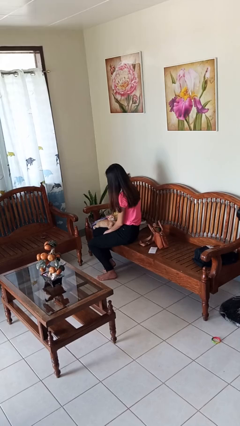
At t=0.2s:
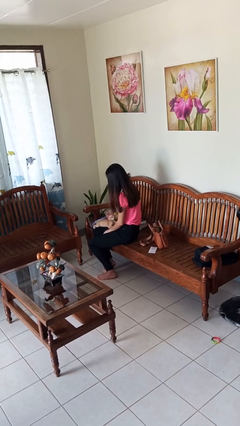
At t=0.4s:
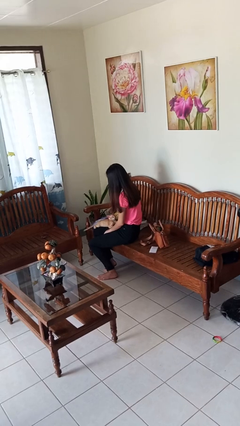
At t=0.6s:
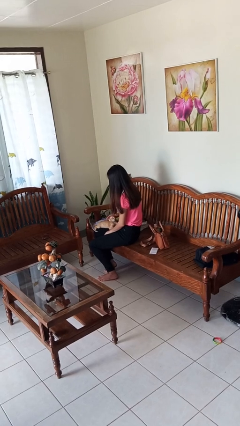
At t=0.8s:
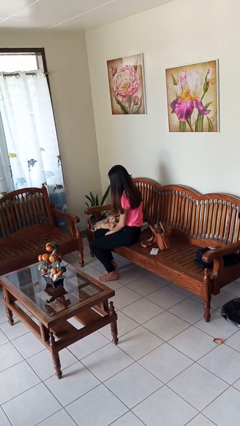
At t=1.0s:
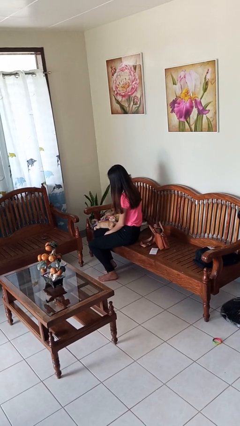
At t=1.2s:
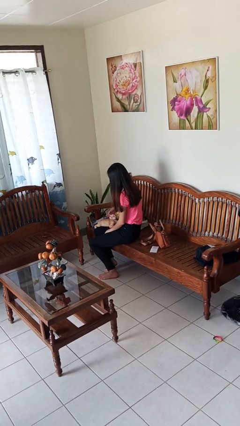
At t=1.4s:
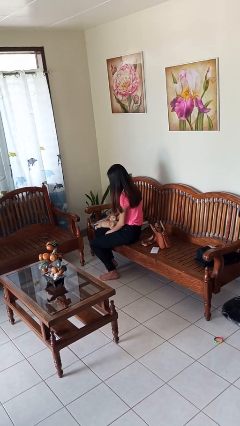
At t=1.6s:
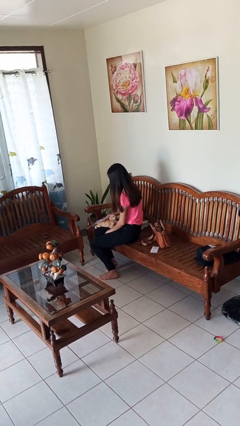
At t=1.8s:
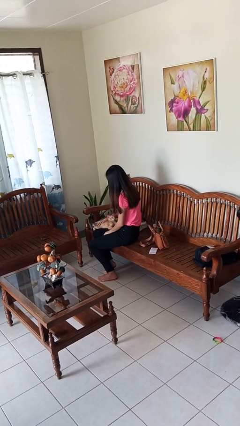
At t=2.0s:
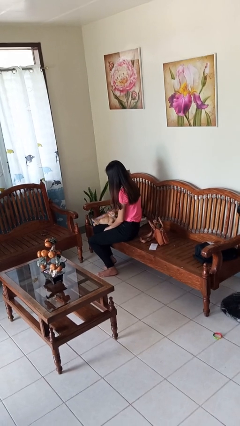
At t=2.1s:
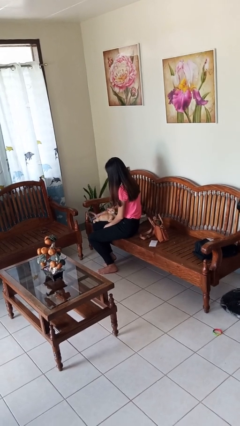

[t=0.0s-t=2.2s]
person pets cat

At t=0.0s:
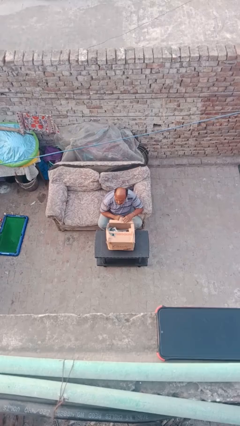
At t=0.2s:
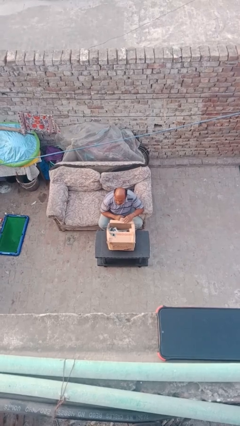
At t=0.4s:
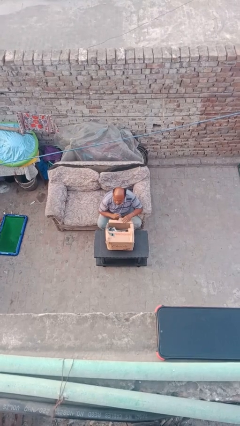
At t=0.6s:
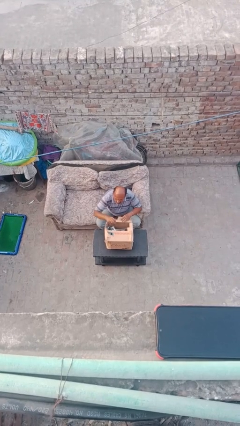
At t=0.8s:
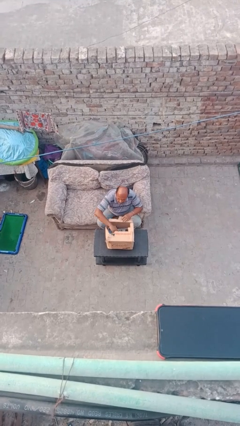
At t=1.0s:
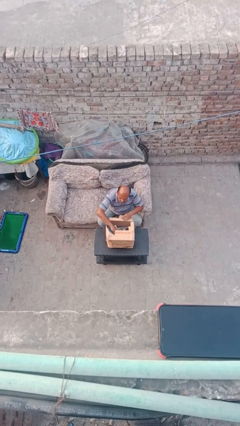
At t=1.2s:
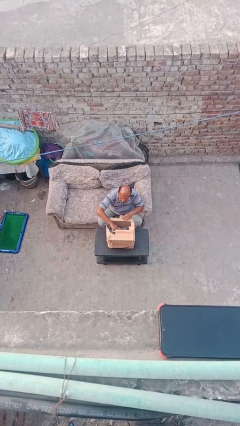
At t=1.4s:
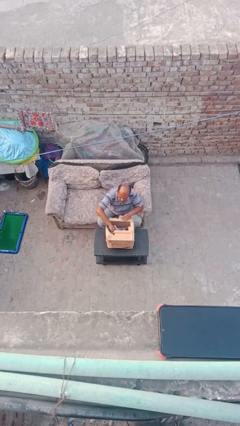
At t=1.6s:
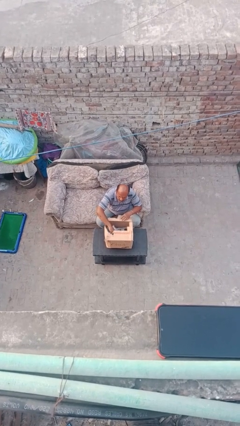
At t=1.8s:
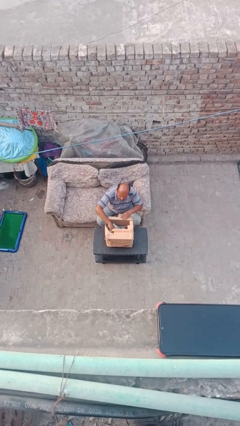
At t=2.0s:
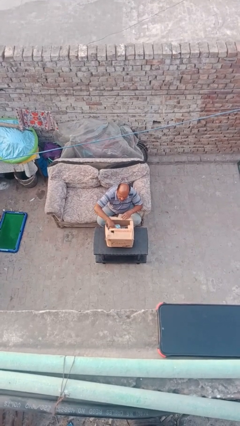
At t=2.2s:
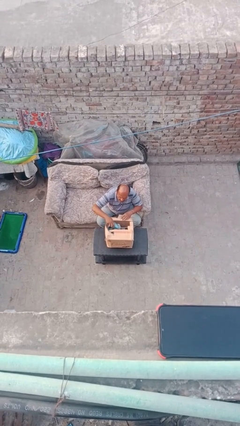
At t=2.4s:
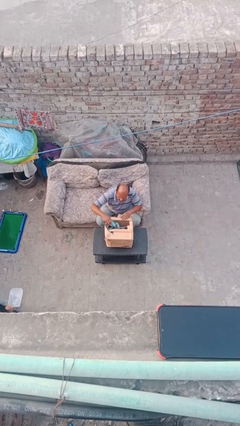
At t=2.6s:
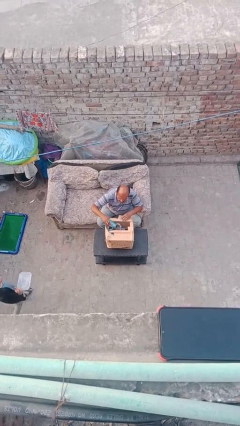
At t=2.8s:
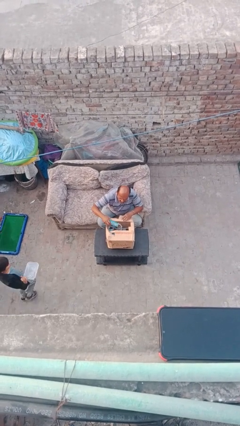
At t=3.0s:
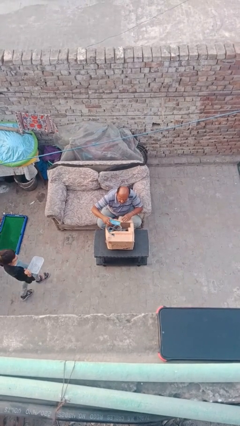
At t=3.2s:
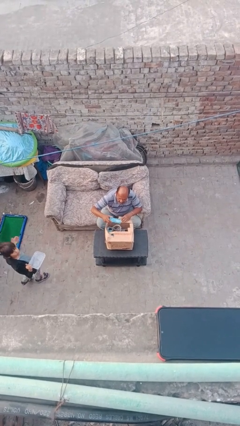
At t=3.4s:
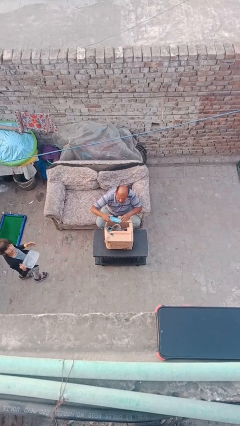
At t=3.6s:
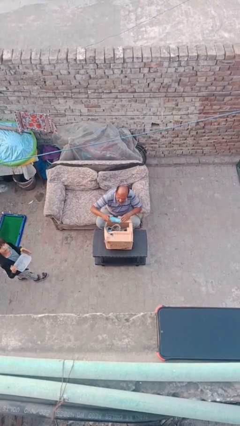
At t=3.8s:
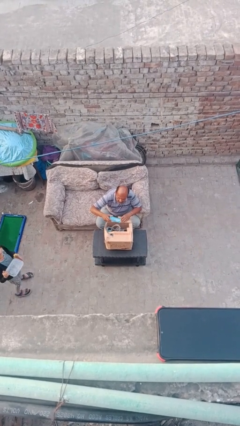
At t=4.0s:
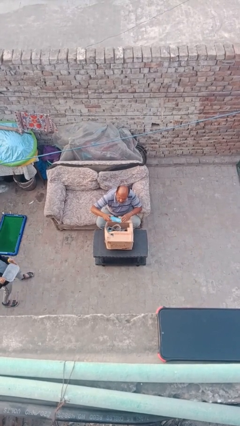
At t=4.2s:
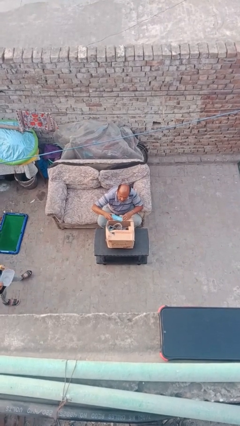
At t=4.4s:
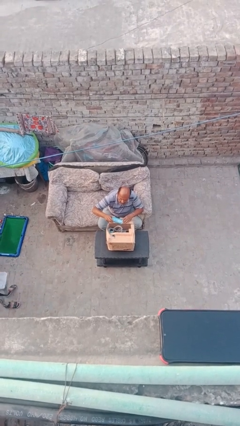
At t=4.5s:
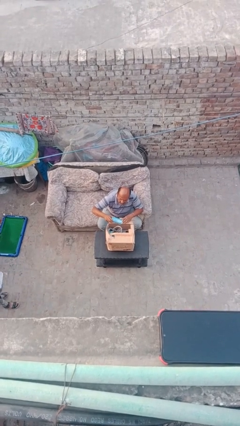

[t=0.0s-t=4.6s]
person takes object from box

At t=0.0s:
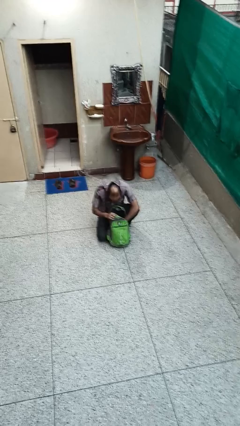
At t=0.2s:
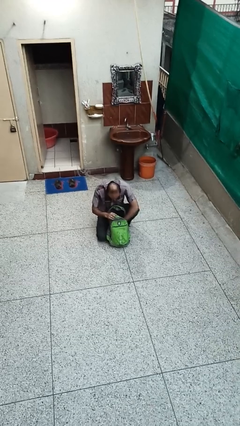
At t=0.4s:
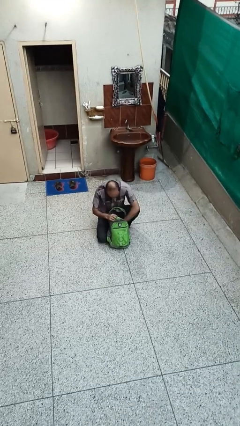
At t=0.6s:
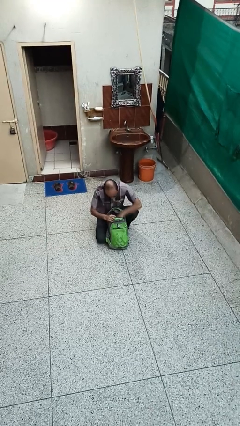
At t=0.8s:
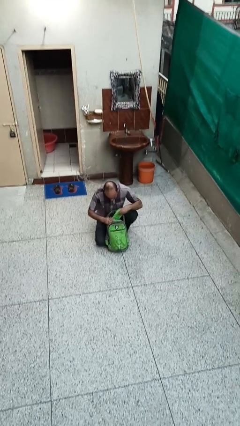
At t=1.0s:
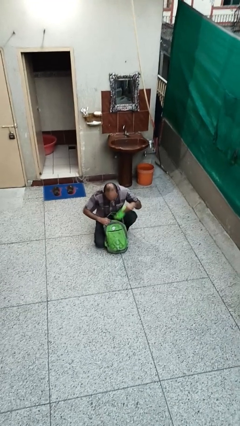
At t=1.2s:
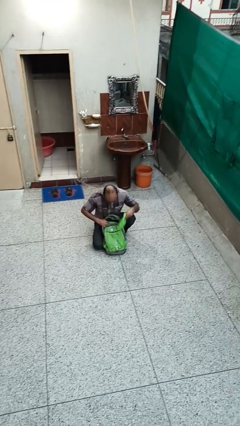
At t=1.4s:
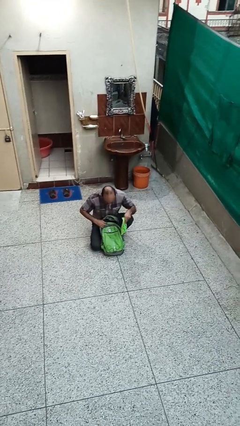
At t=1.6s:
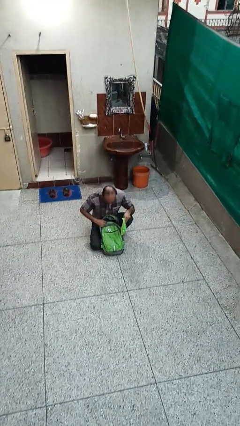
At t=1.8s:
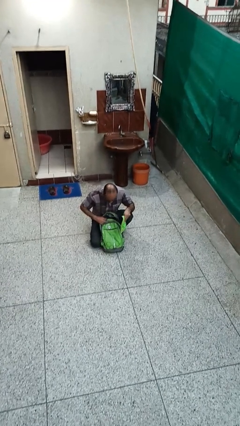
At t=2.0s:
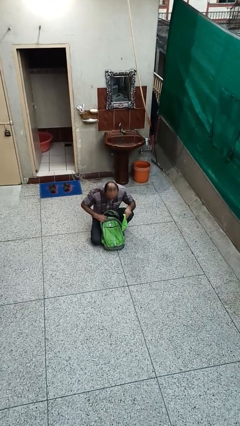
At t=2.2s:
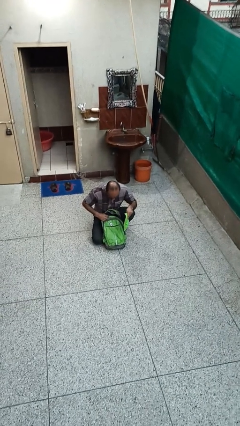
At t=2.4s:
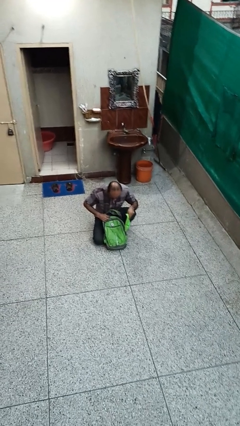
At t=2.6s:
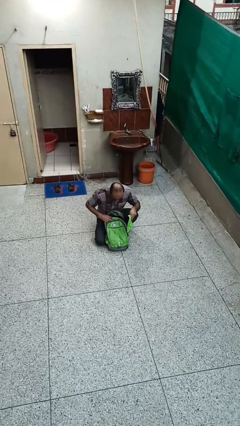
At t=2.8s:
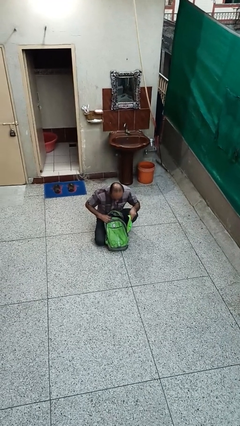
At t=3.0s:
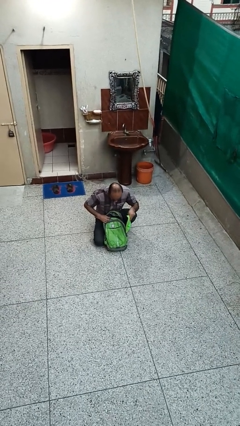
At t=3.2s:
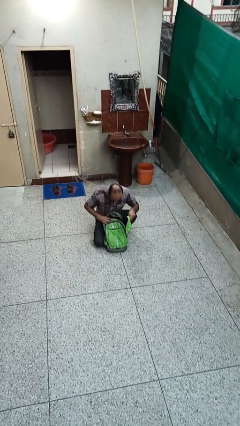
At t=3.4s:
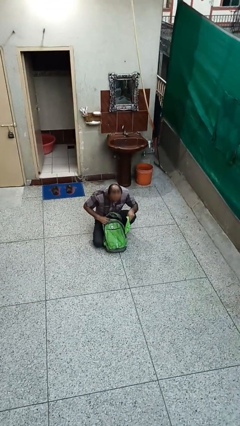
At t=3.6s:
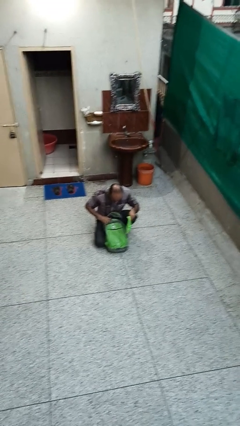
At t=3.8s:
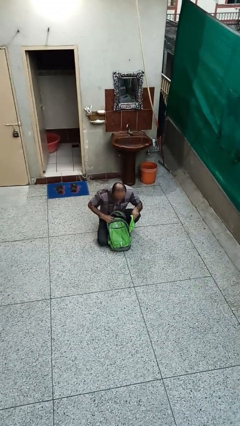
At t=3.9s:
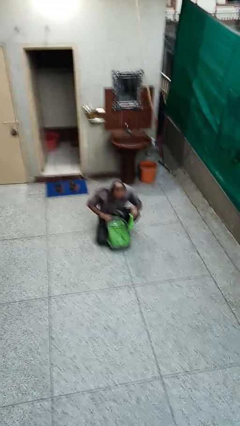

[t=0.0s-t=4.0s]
person takes object from backpack

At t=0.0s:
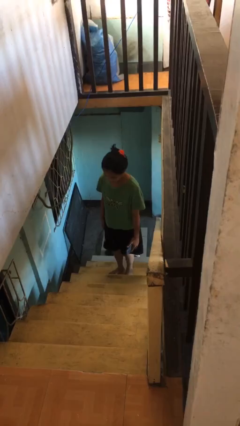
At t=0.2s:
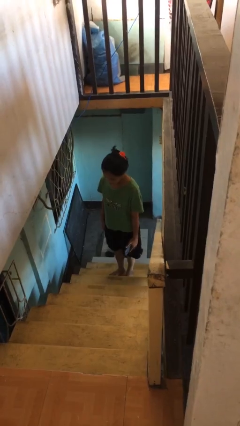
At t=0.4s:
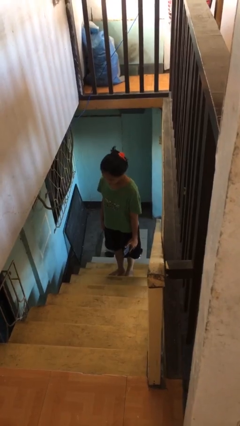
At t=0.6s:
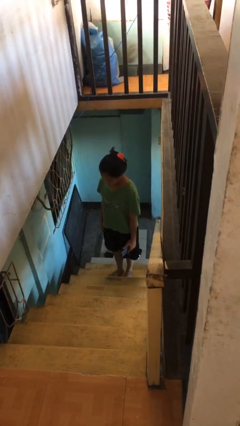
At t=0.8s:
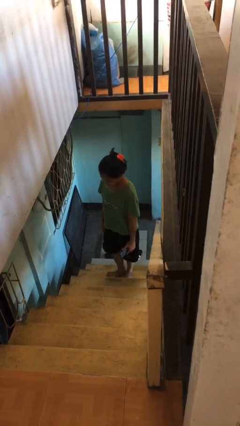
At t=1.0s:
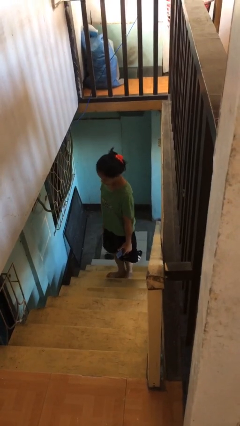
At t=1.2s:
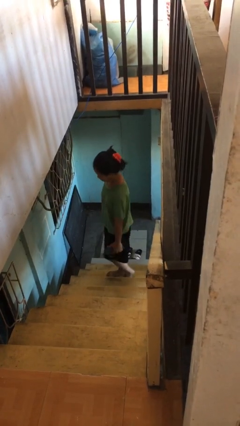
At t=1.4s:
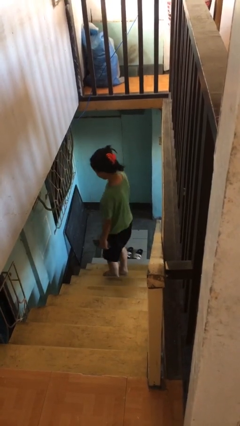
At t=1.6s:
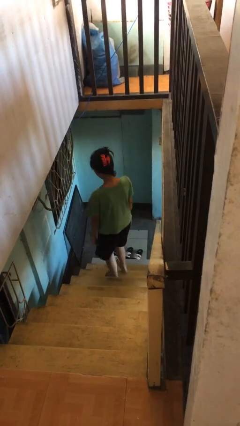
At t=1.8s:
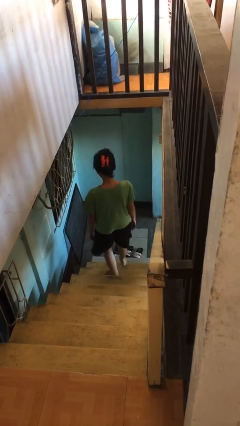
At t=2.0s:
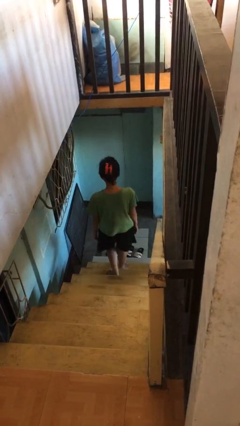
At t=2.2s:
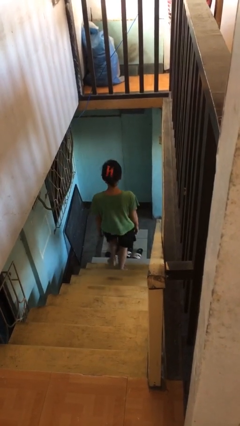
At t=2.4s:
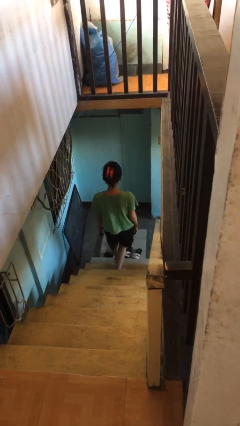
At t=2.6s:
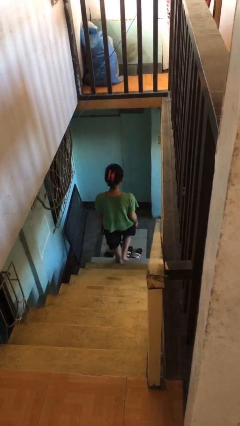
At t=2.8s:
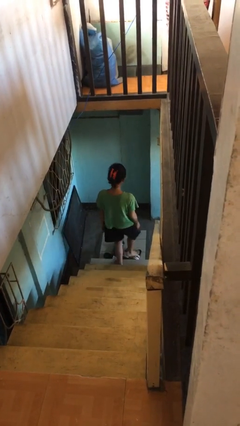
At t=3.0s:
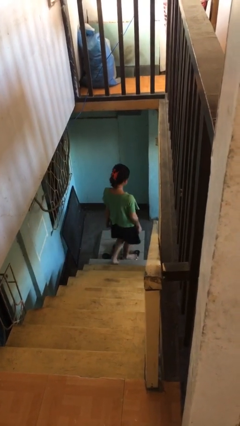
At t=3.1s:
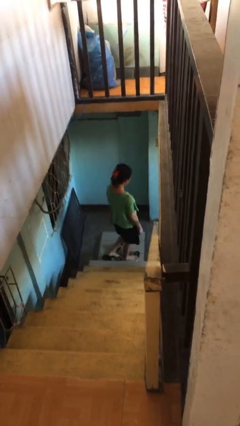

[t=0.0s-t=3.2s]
person climbs down stairs

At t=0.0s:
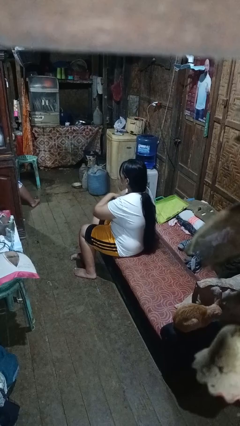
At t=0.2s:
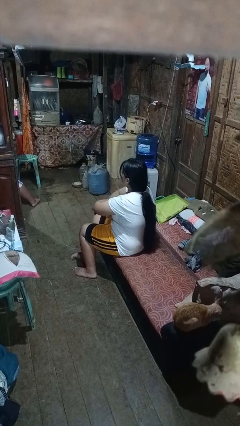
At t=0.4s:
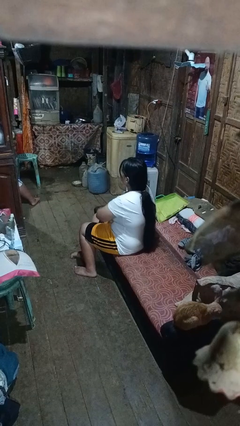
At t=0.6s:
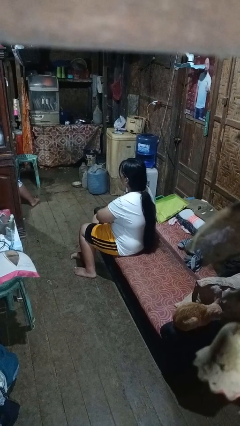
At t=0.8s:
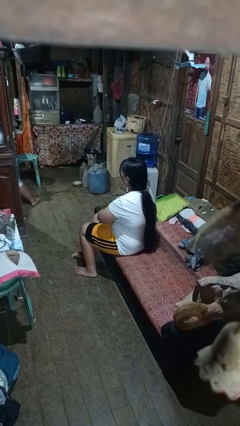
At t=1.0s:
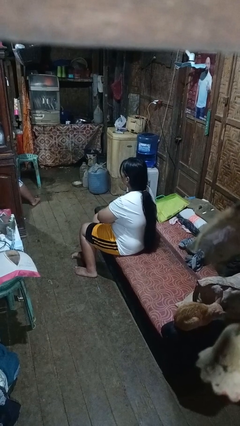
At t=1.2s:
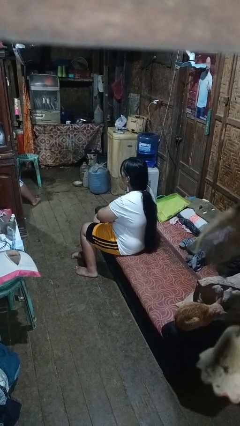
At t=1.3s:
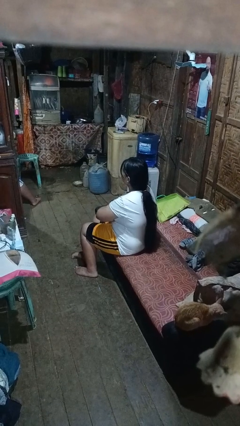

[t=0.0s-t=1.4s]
person gestures arms x

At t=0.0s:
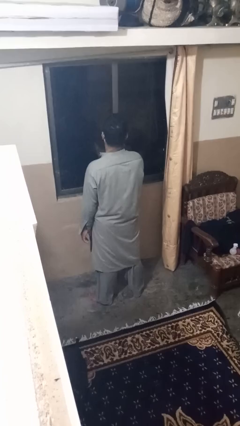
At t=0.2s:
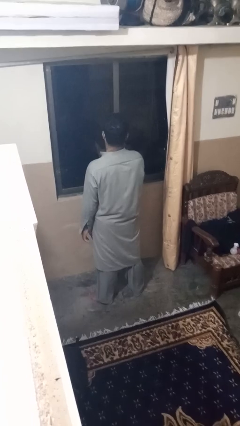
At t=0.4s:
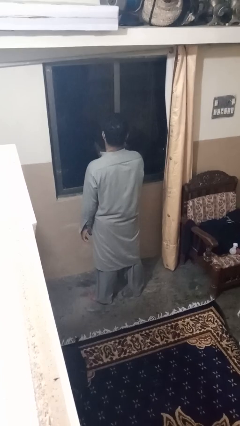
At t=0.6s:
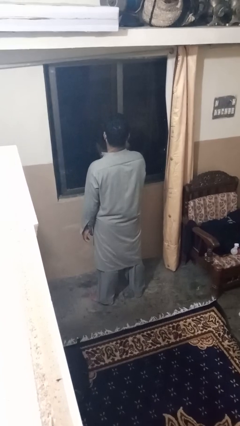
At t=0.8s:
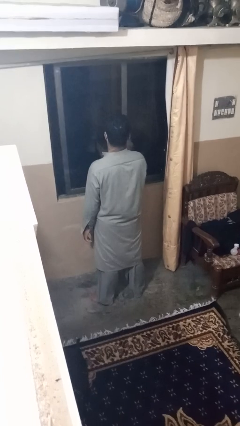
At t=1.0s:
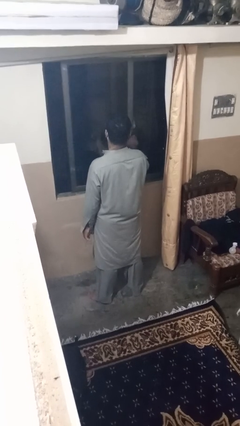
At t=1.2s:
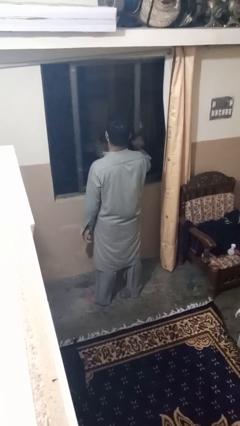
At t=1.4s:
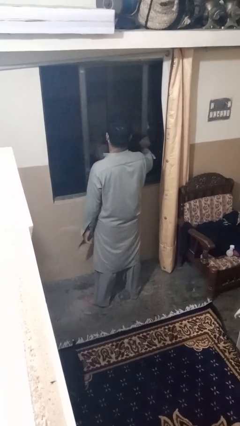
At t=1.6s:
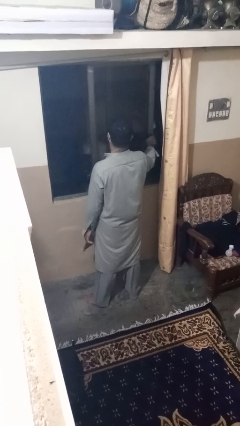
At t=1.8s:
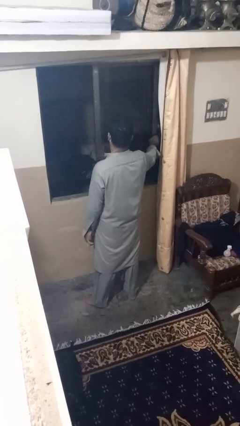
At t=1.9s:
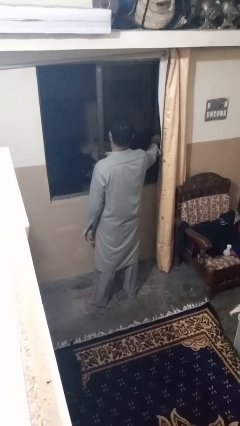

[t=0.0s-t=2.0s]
person opens home window
